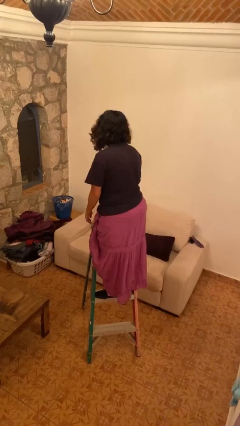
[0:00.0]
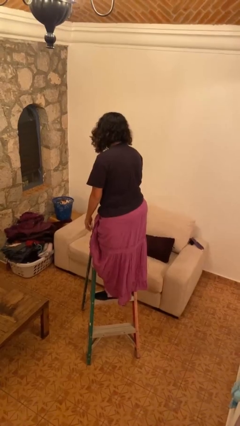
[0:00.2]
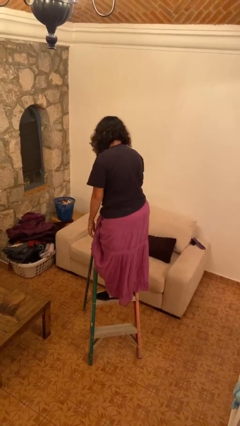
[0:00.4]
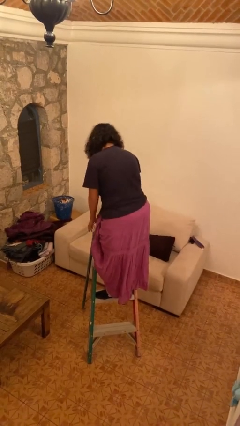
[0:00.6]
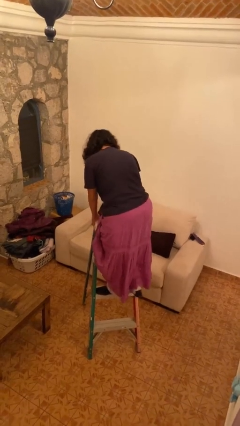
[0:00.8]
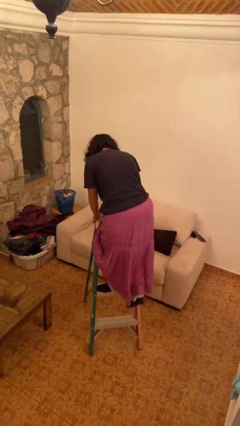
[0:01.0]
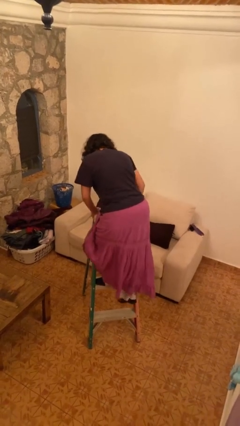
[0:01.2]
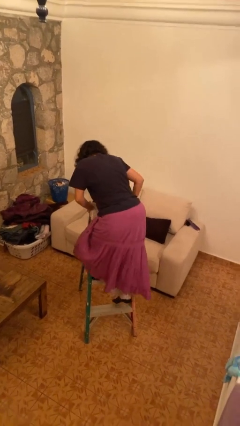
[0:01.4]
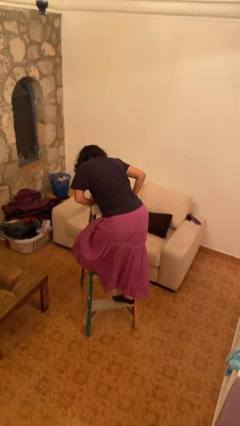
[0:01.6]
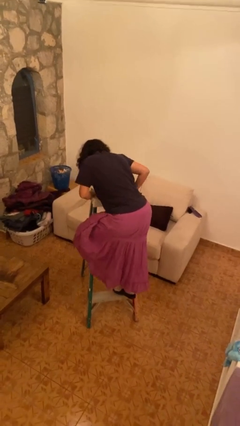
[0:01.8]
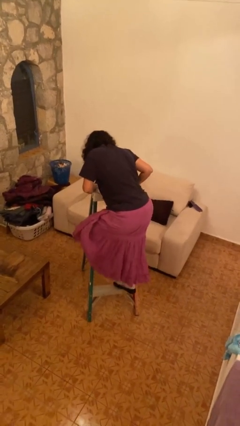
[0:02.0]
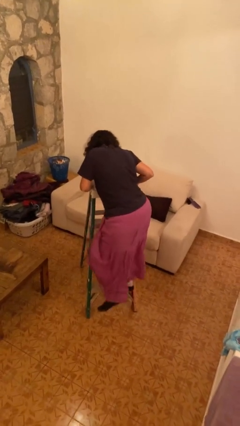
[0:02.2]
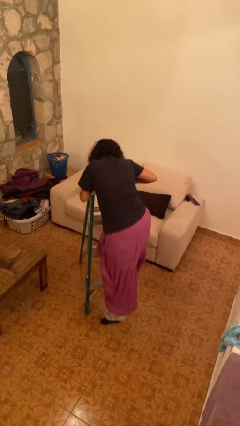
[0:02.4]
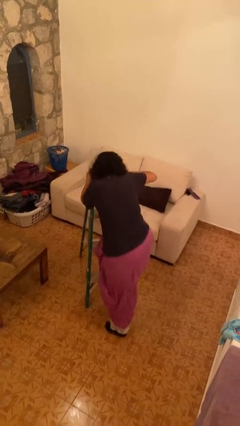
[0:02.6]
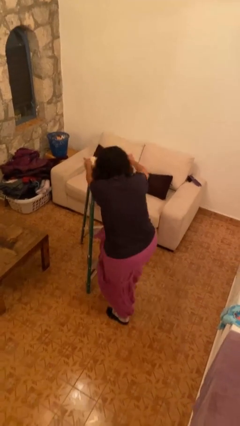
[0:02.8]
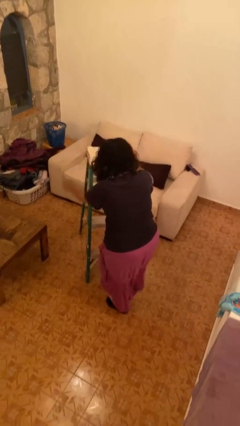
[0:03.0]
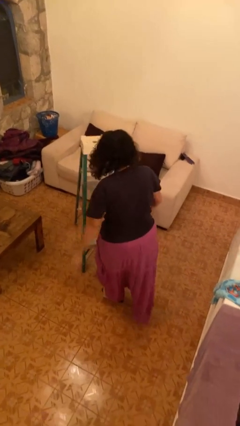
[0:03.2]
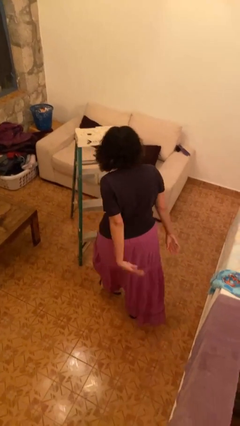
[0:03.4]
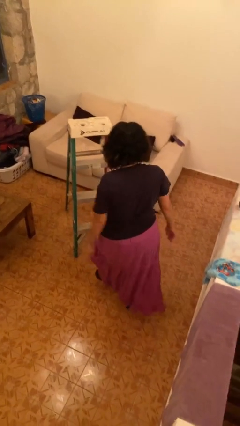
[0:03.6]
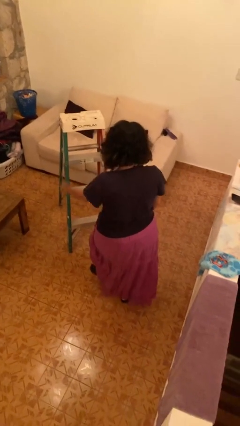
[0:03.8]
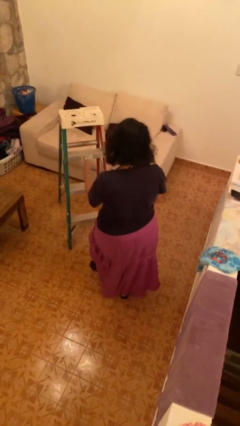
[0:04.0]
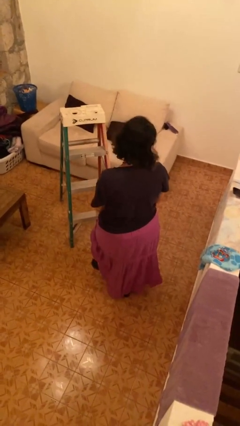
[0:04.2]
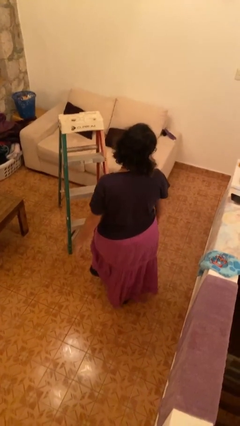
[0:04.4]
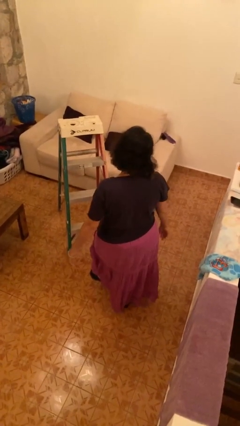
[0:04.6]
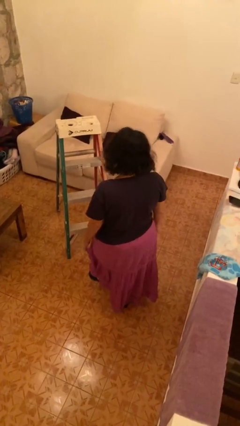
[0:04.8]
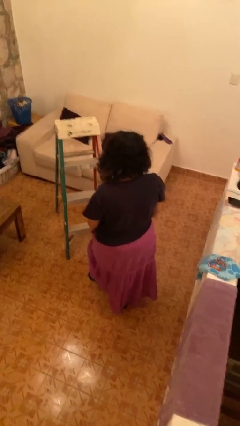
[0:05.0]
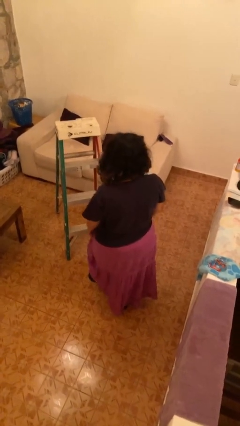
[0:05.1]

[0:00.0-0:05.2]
person climbs down ladder

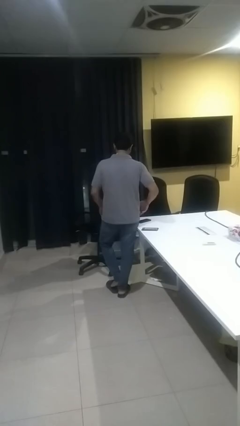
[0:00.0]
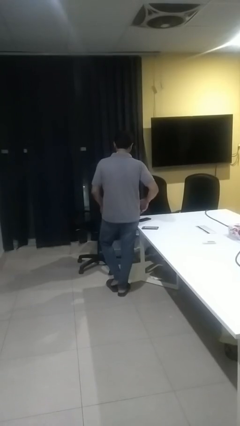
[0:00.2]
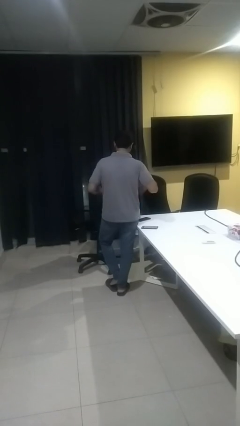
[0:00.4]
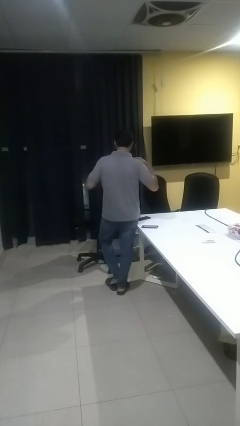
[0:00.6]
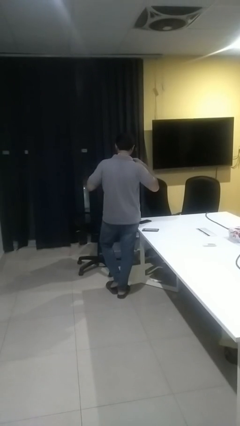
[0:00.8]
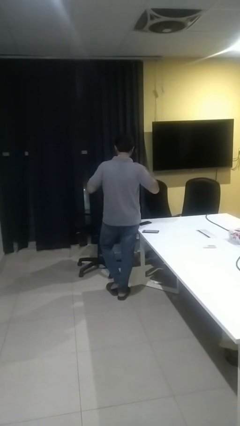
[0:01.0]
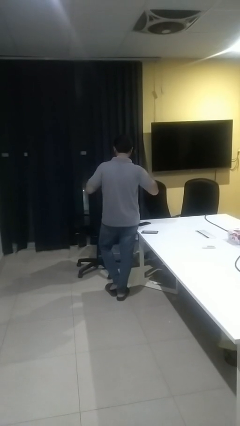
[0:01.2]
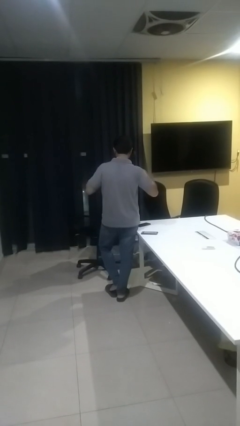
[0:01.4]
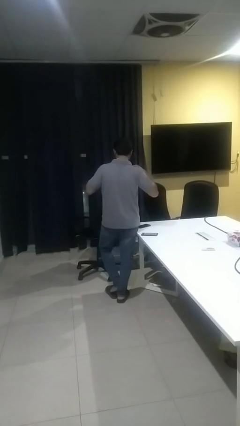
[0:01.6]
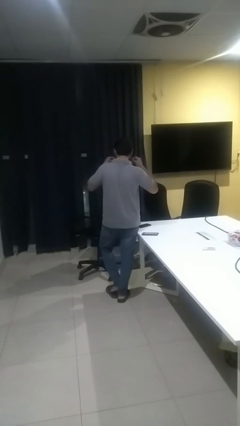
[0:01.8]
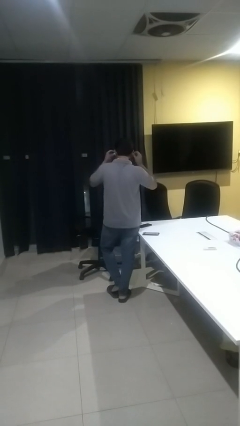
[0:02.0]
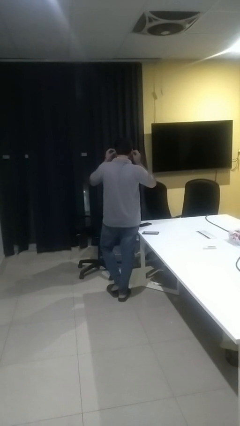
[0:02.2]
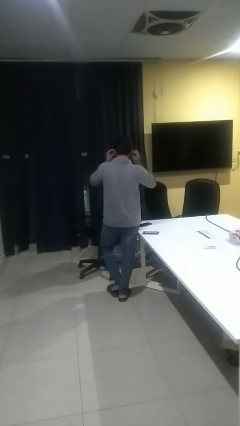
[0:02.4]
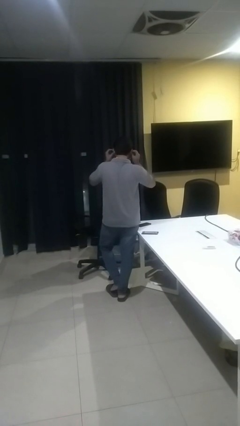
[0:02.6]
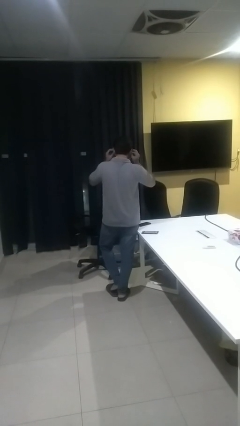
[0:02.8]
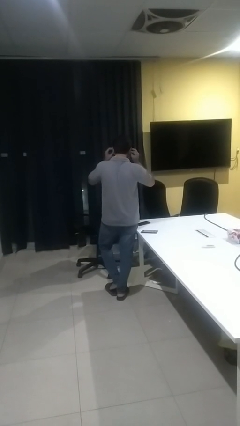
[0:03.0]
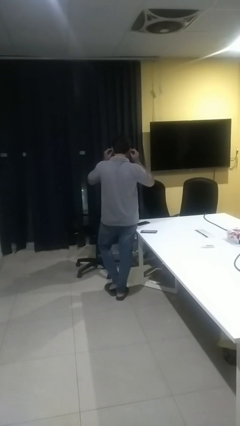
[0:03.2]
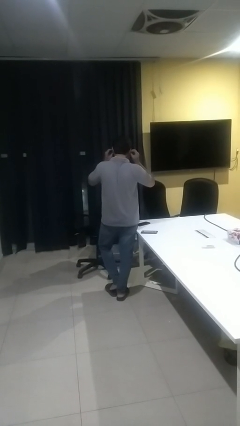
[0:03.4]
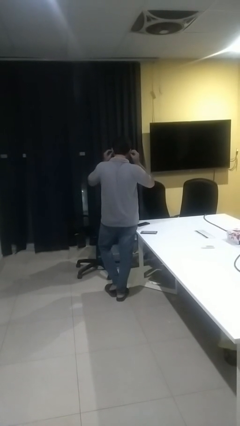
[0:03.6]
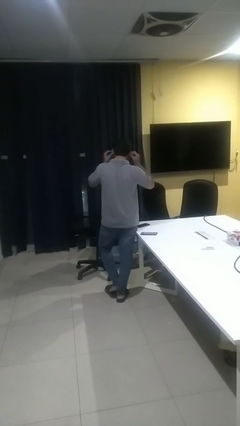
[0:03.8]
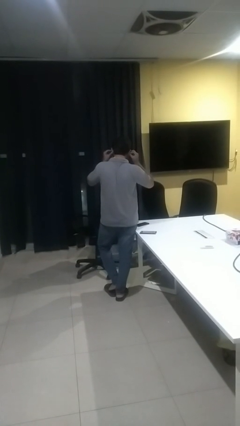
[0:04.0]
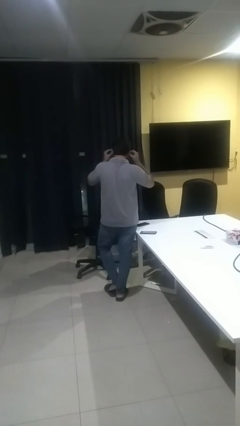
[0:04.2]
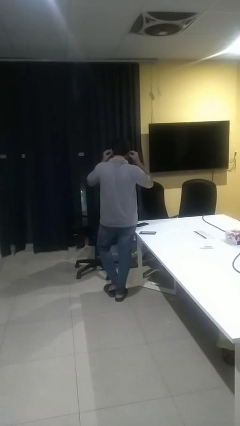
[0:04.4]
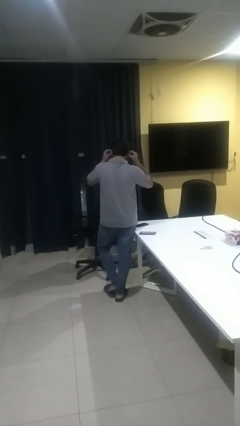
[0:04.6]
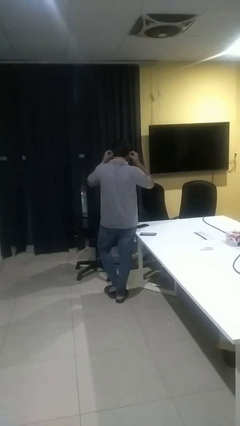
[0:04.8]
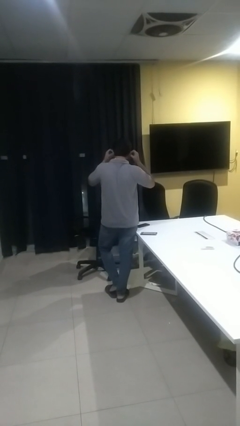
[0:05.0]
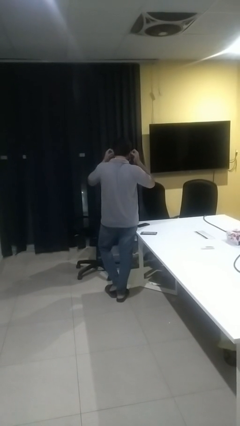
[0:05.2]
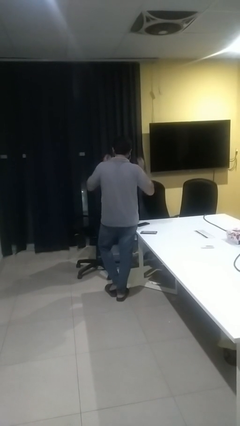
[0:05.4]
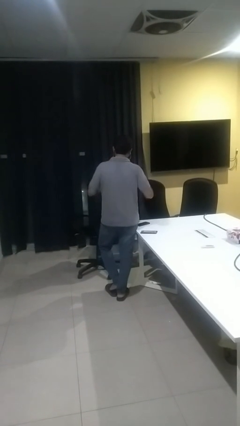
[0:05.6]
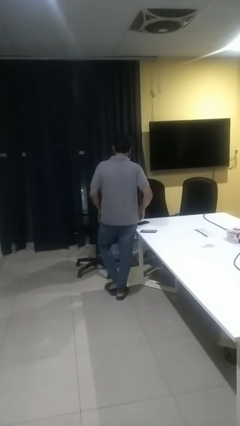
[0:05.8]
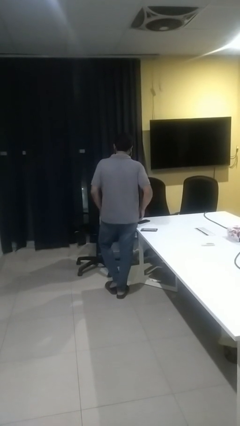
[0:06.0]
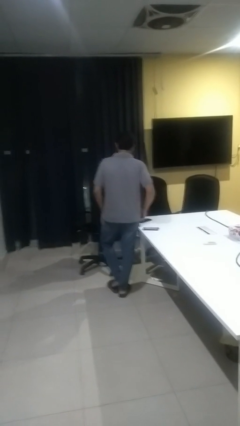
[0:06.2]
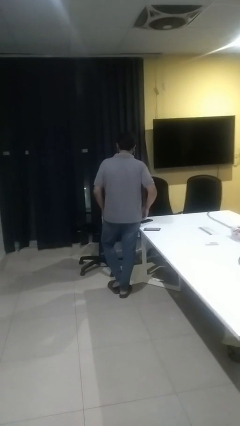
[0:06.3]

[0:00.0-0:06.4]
person puts on headphones

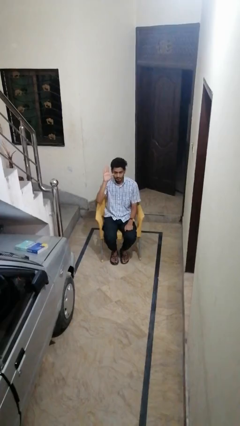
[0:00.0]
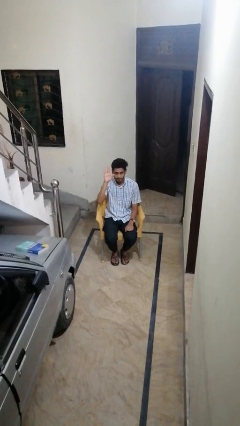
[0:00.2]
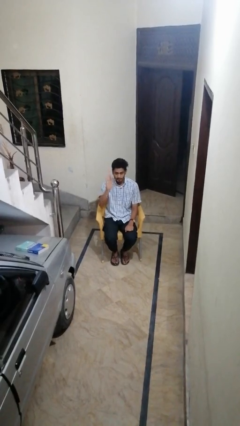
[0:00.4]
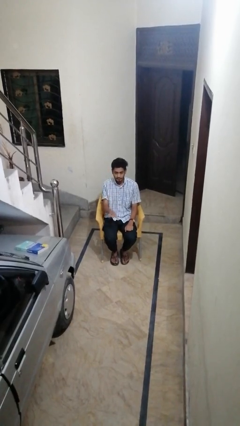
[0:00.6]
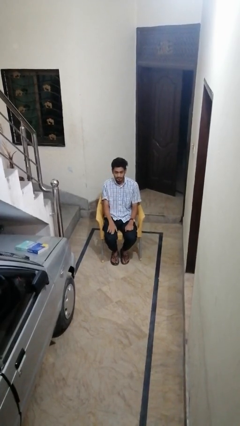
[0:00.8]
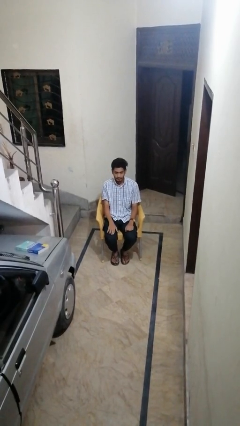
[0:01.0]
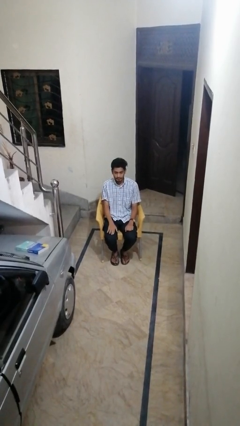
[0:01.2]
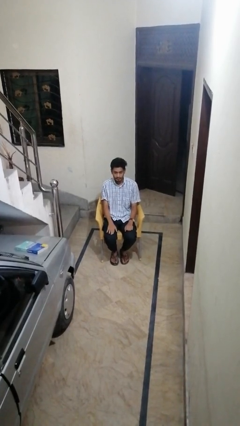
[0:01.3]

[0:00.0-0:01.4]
person gestures lower hand

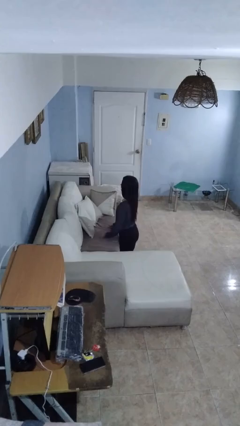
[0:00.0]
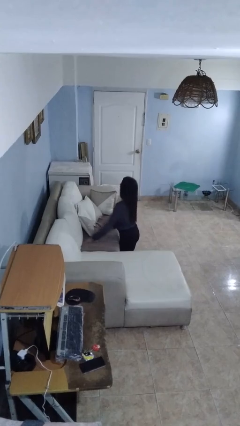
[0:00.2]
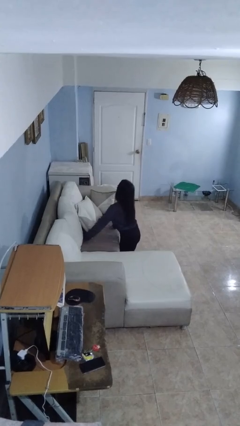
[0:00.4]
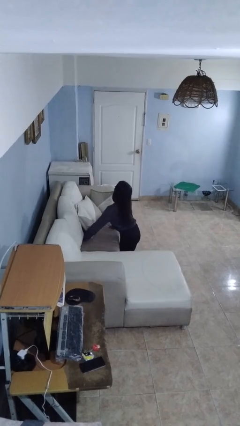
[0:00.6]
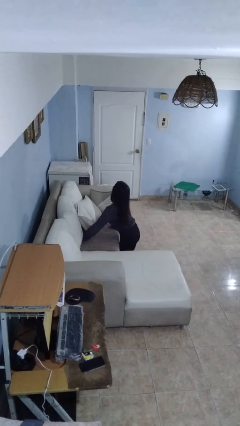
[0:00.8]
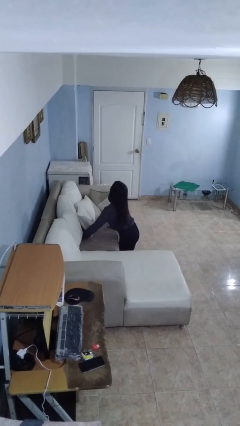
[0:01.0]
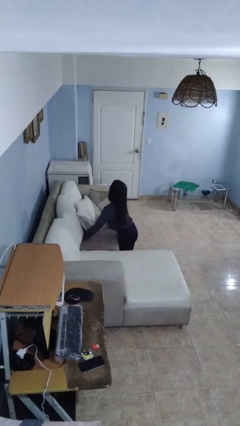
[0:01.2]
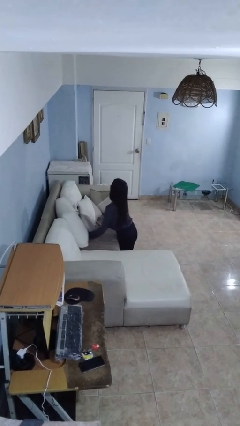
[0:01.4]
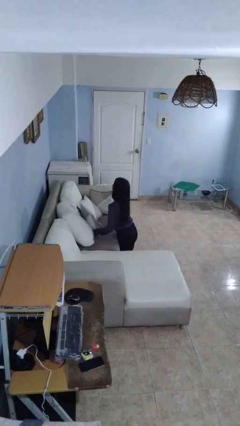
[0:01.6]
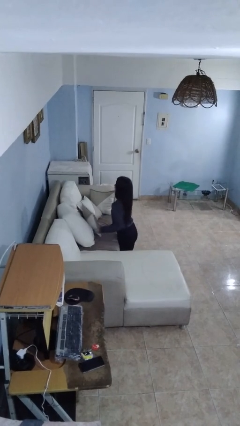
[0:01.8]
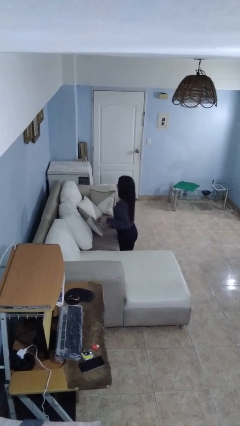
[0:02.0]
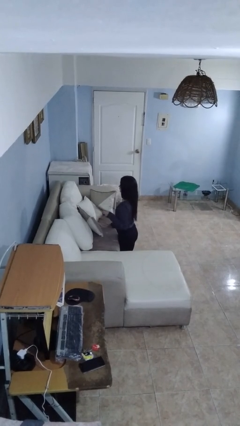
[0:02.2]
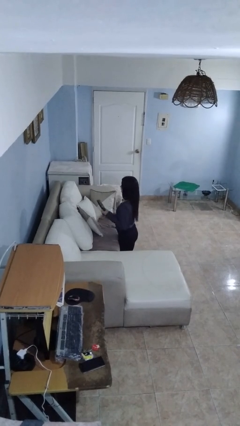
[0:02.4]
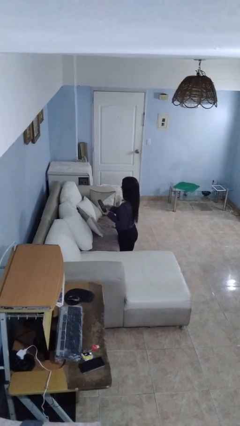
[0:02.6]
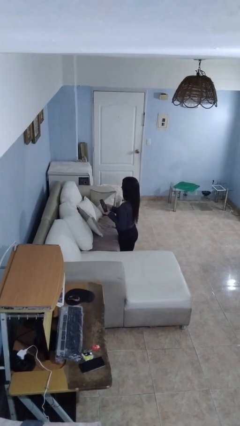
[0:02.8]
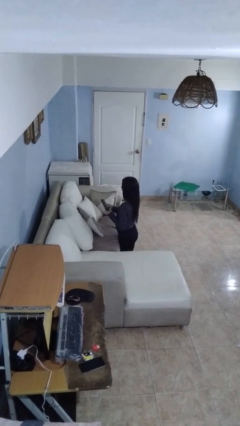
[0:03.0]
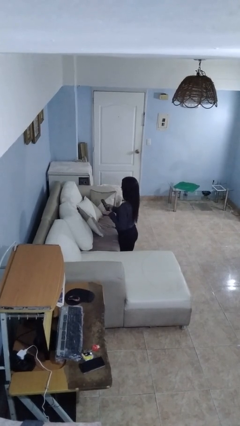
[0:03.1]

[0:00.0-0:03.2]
person searches in couch

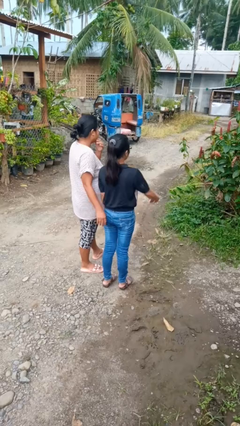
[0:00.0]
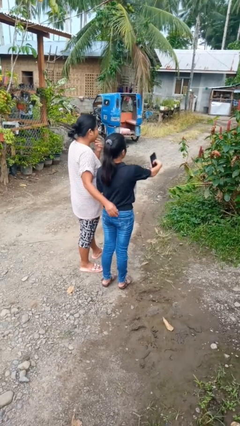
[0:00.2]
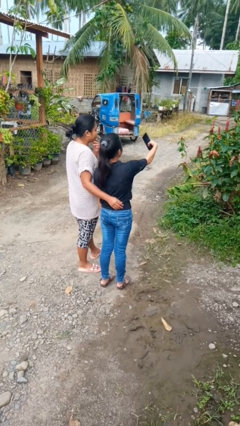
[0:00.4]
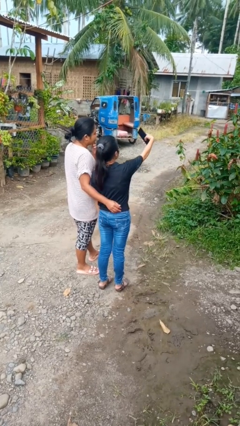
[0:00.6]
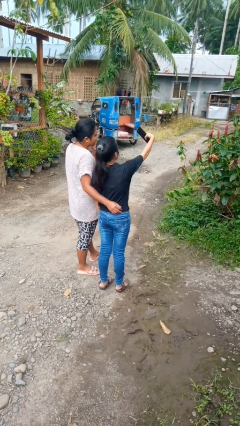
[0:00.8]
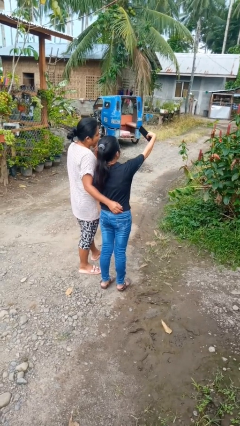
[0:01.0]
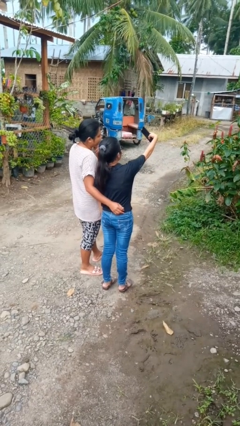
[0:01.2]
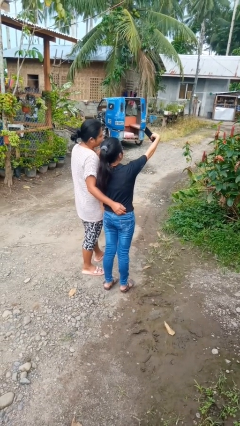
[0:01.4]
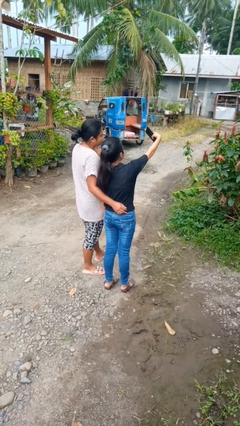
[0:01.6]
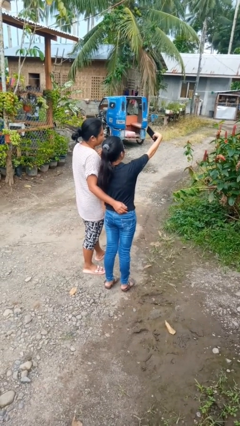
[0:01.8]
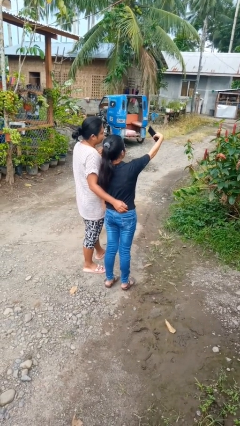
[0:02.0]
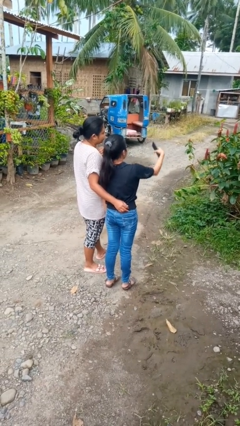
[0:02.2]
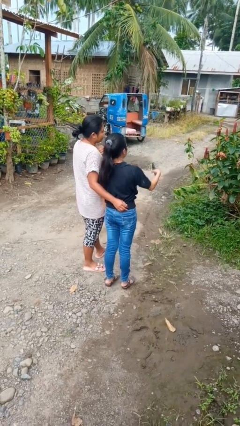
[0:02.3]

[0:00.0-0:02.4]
person takes selfie with person
